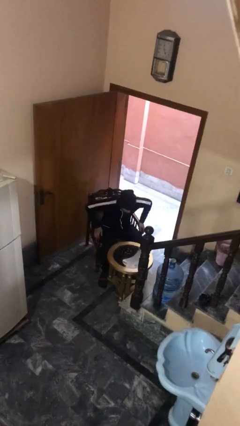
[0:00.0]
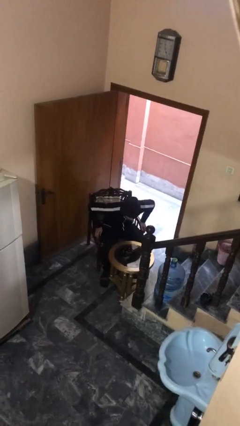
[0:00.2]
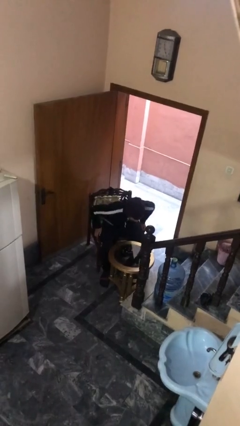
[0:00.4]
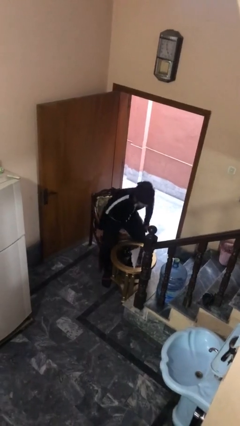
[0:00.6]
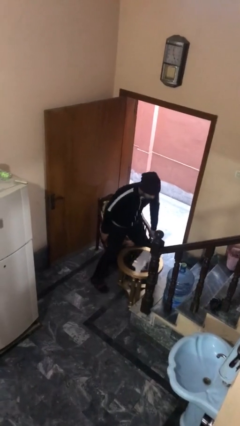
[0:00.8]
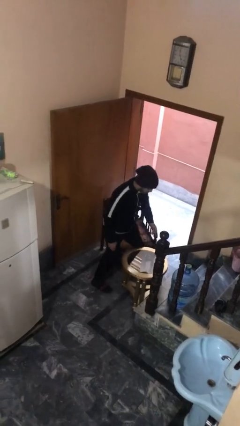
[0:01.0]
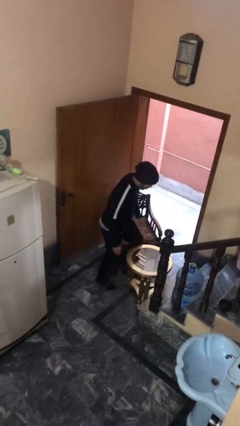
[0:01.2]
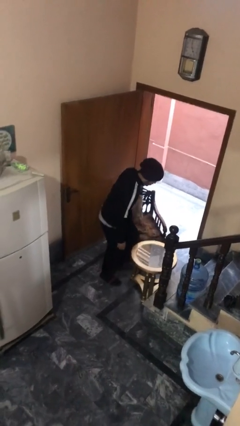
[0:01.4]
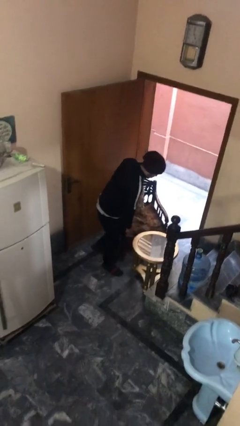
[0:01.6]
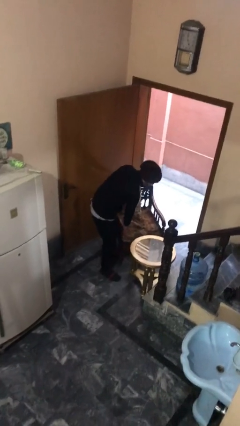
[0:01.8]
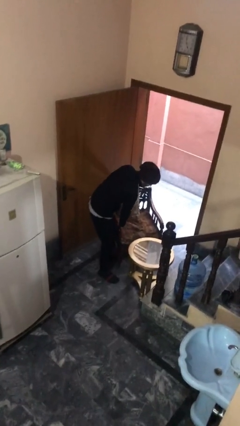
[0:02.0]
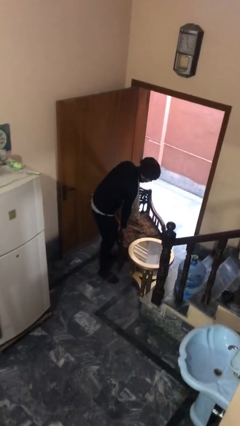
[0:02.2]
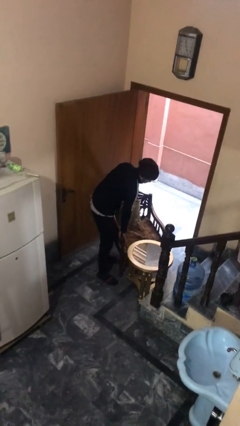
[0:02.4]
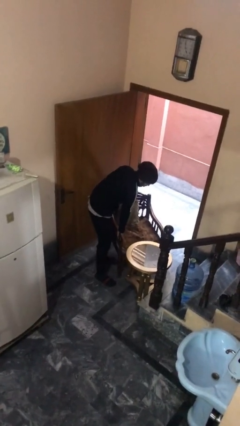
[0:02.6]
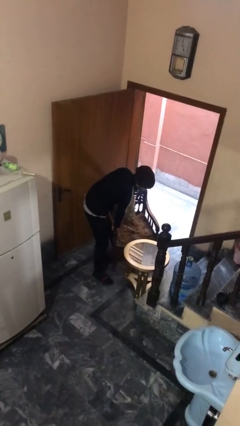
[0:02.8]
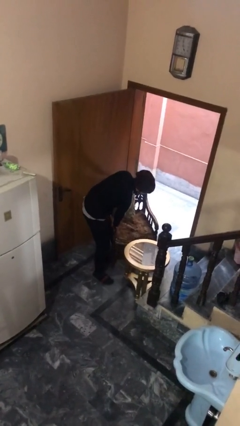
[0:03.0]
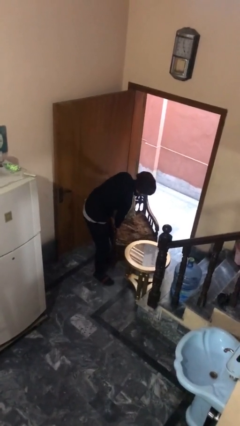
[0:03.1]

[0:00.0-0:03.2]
person stands up

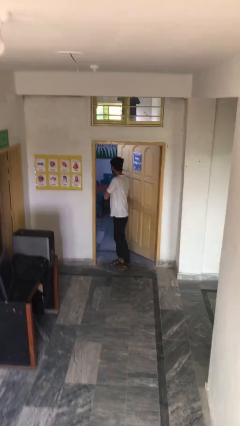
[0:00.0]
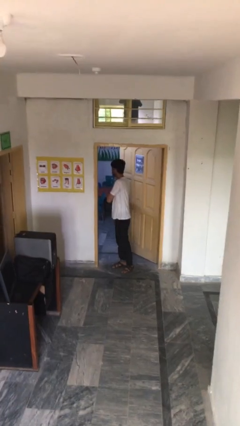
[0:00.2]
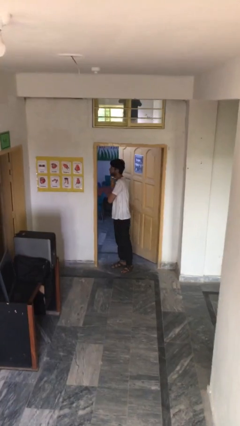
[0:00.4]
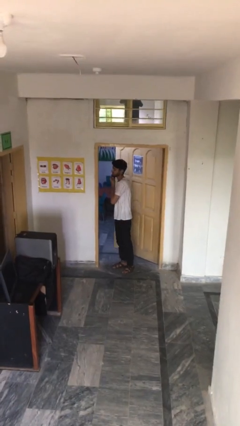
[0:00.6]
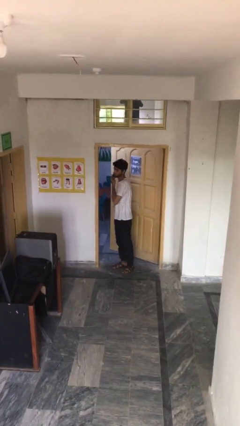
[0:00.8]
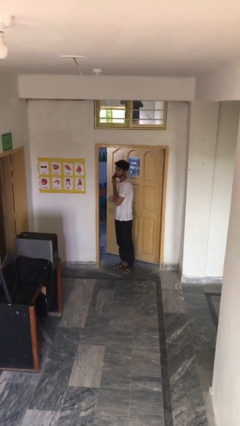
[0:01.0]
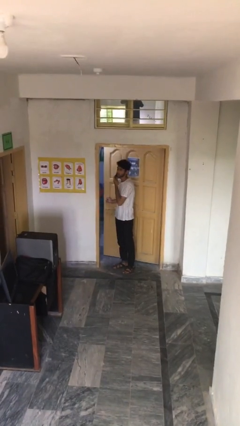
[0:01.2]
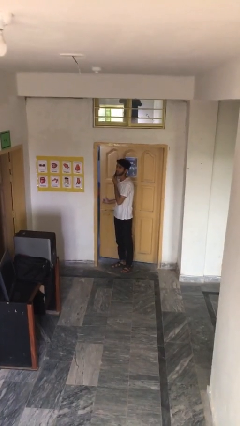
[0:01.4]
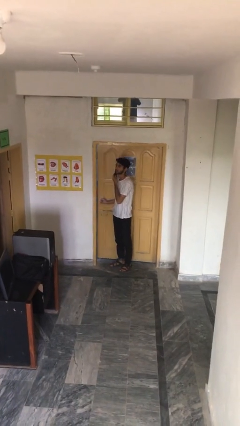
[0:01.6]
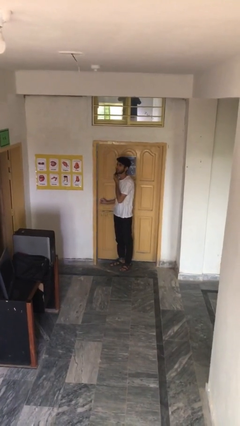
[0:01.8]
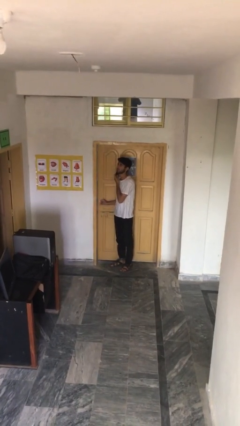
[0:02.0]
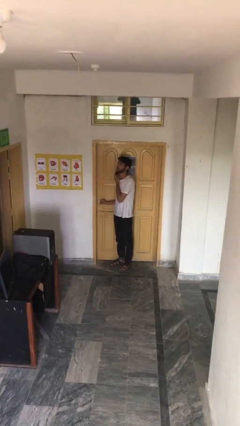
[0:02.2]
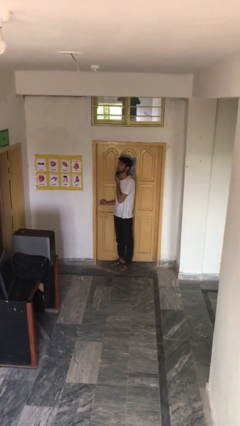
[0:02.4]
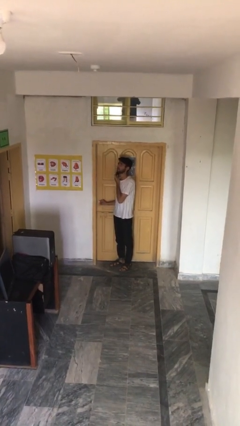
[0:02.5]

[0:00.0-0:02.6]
person closes facility door

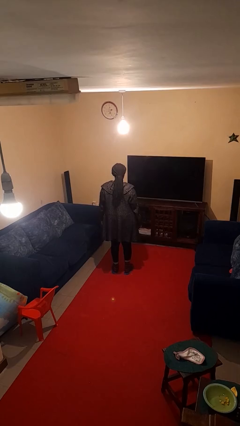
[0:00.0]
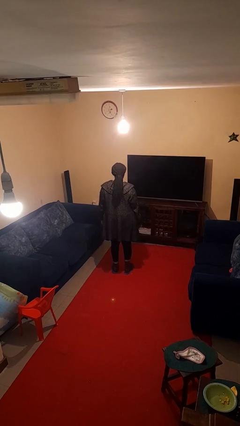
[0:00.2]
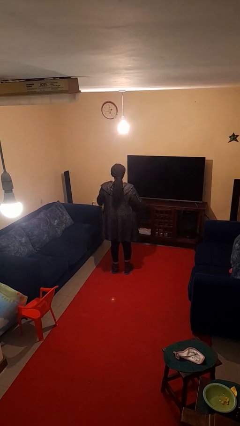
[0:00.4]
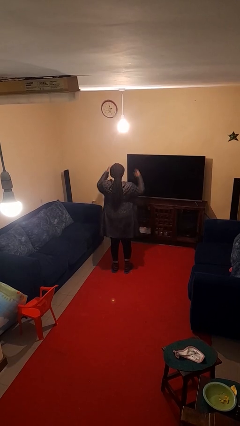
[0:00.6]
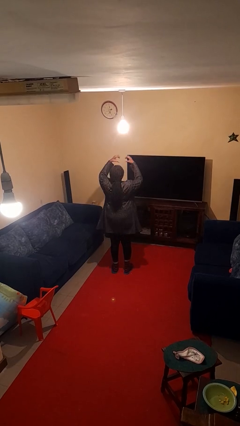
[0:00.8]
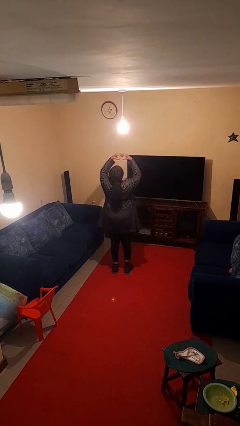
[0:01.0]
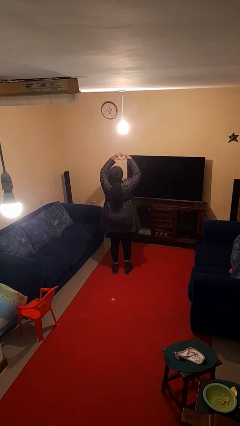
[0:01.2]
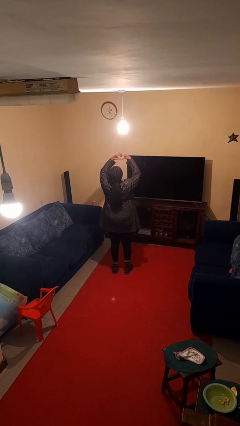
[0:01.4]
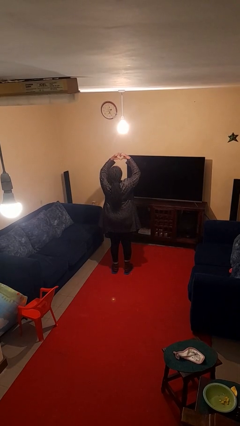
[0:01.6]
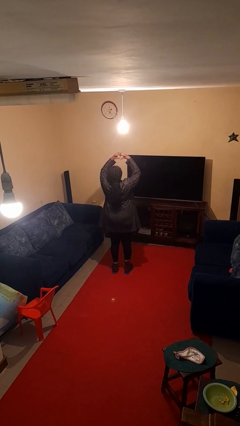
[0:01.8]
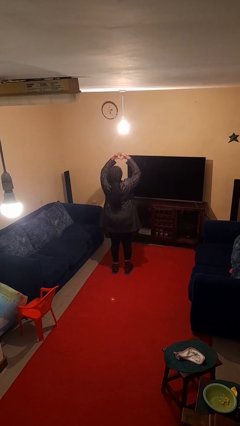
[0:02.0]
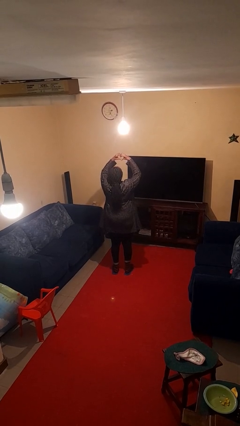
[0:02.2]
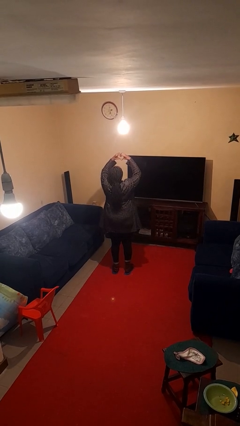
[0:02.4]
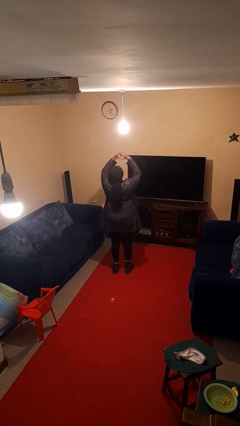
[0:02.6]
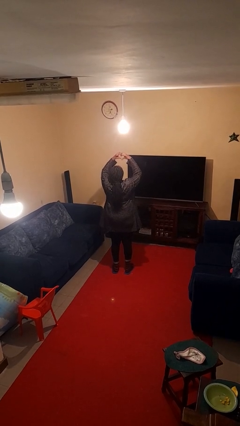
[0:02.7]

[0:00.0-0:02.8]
person gestures heart

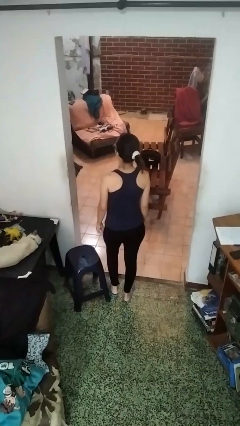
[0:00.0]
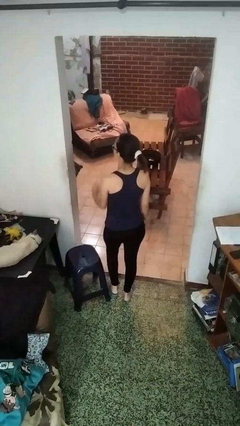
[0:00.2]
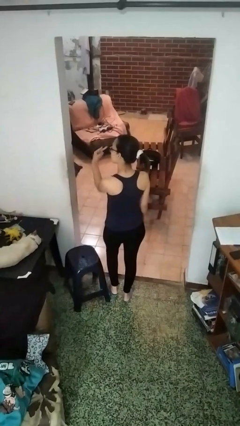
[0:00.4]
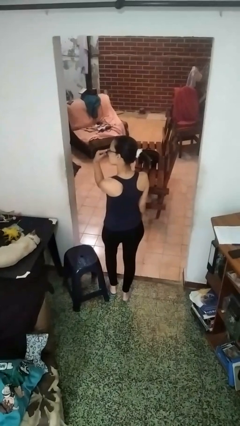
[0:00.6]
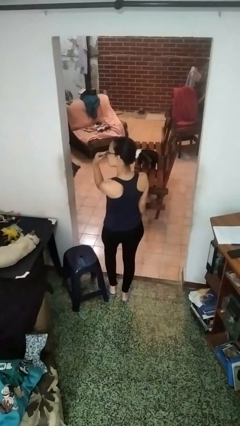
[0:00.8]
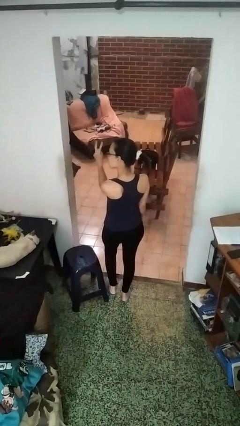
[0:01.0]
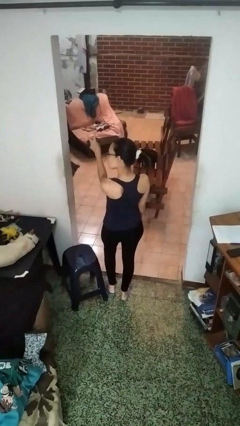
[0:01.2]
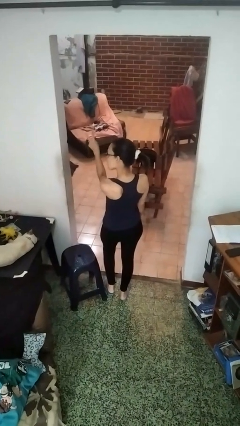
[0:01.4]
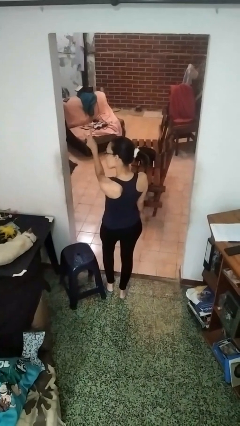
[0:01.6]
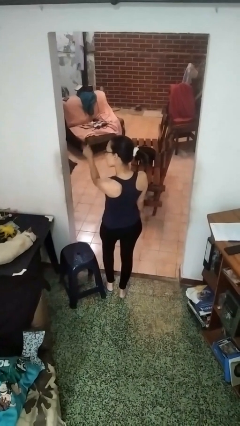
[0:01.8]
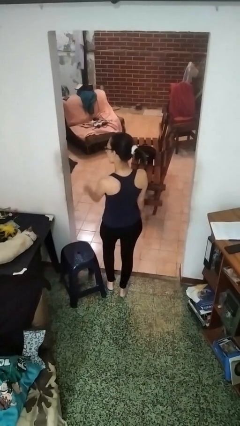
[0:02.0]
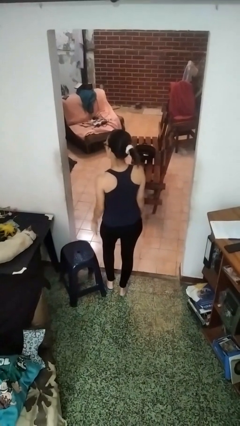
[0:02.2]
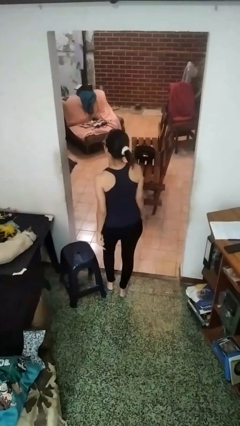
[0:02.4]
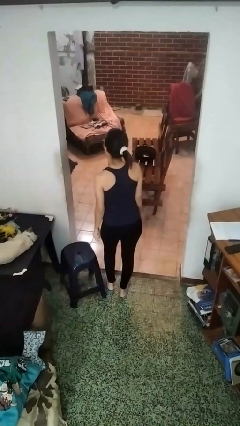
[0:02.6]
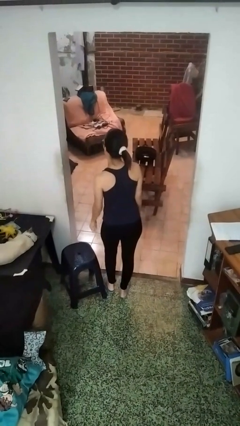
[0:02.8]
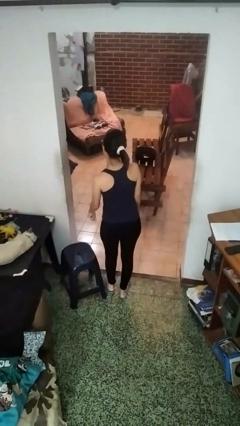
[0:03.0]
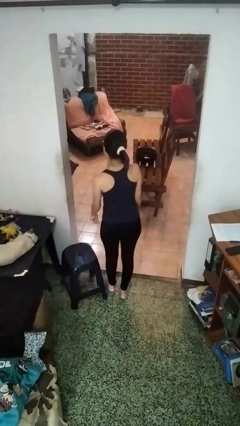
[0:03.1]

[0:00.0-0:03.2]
person gestures watch closely

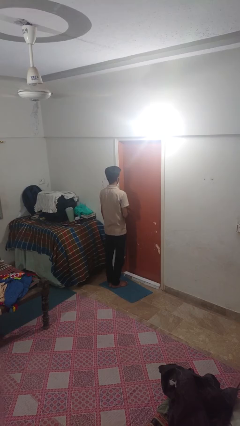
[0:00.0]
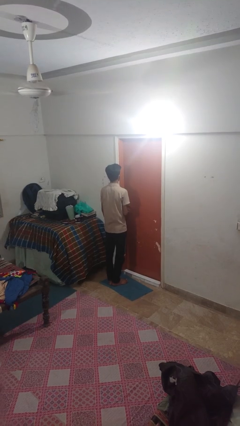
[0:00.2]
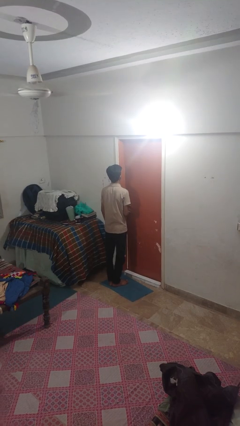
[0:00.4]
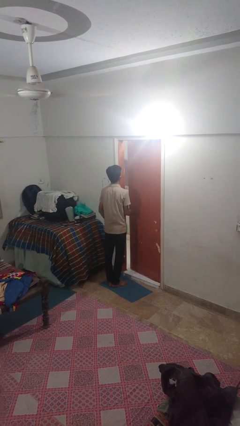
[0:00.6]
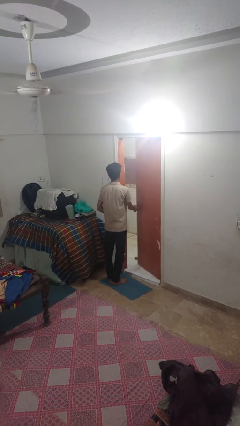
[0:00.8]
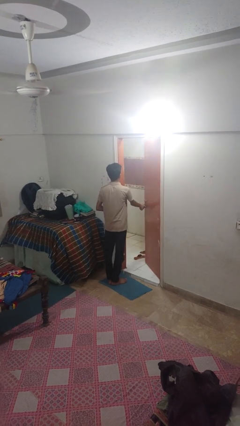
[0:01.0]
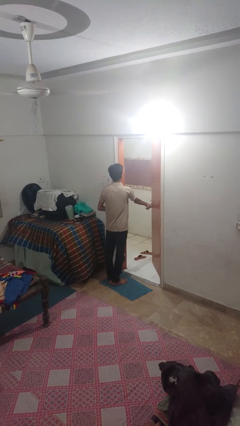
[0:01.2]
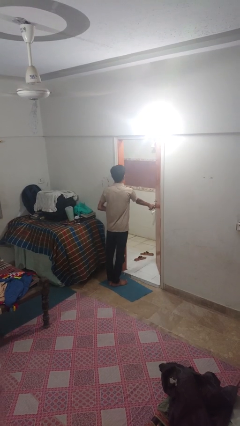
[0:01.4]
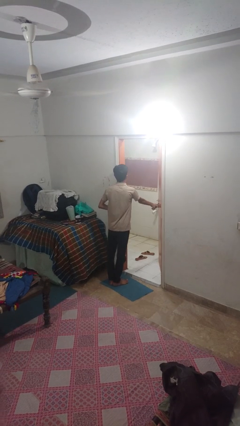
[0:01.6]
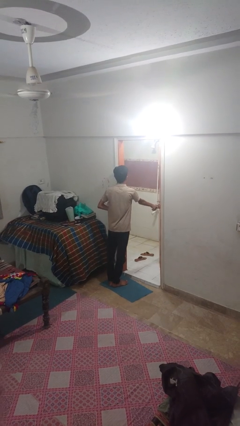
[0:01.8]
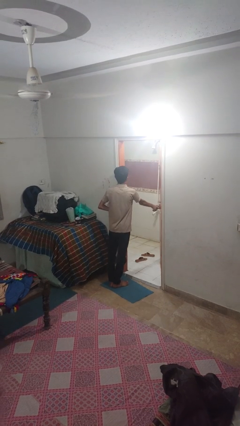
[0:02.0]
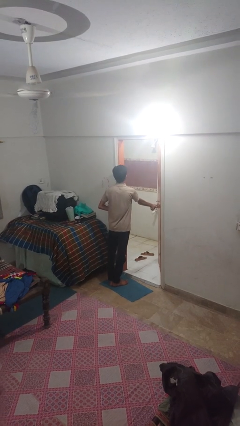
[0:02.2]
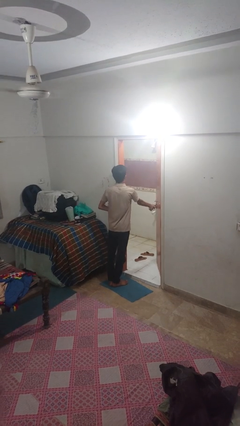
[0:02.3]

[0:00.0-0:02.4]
person opens facility door

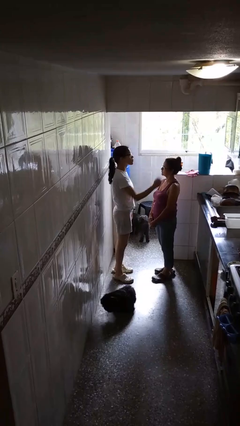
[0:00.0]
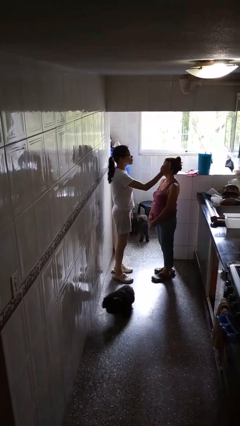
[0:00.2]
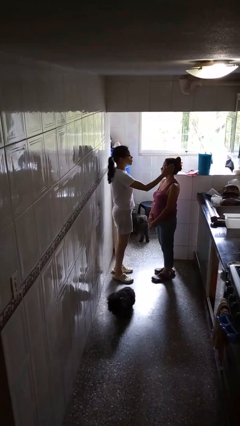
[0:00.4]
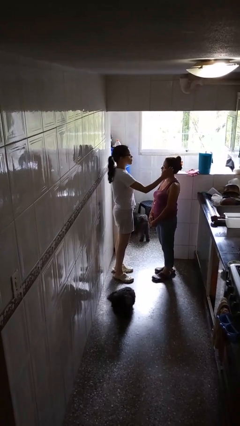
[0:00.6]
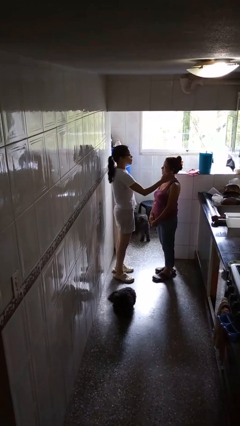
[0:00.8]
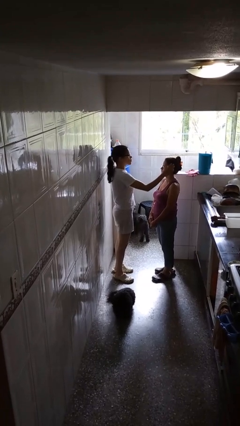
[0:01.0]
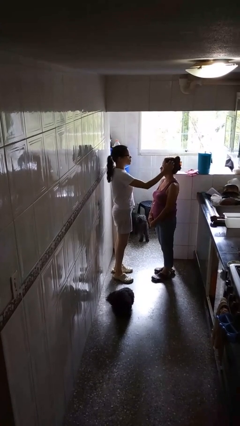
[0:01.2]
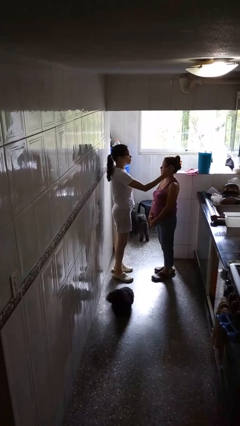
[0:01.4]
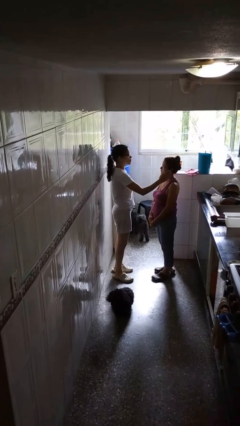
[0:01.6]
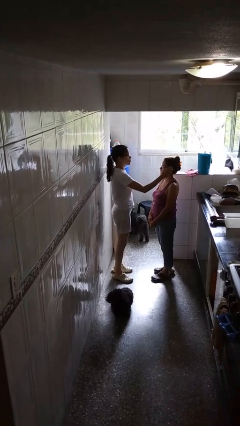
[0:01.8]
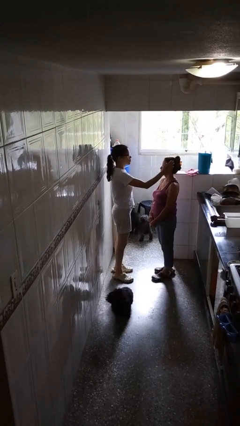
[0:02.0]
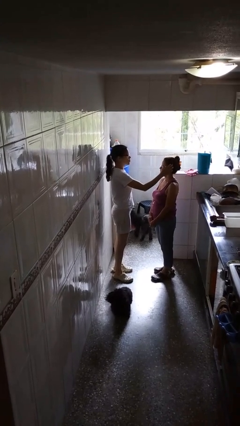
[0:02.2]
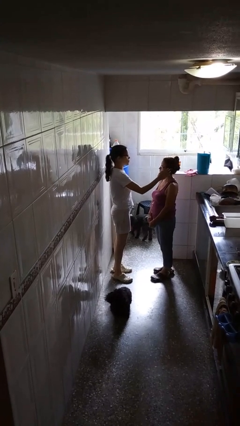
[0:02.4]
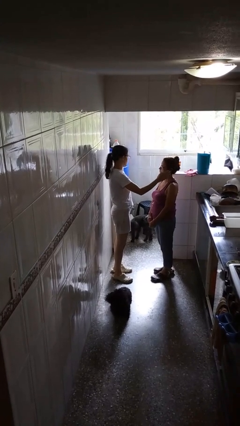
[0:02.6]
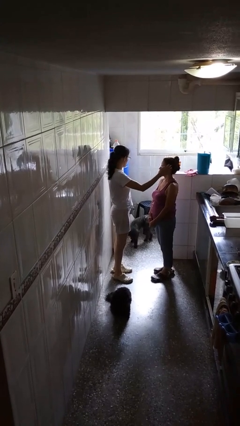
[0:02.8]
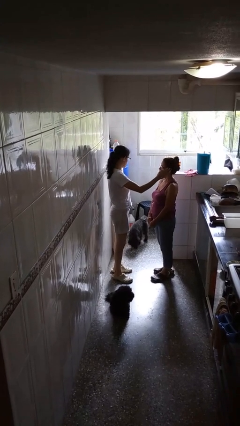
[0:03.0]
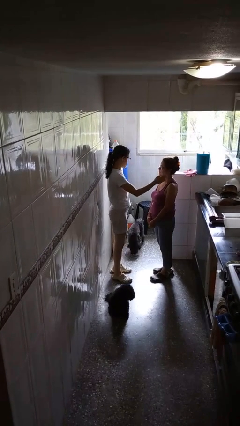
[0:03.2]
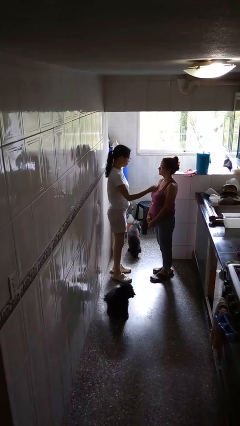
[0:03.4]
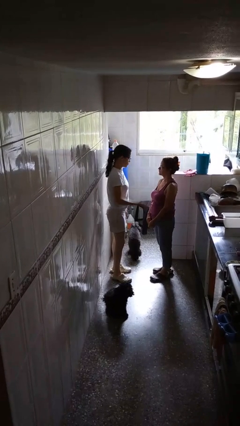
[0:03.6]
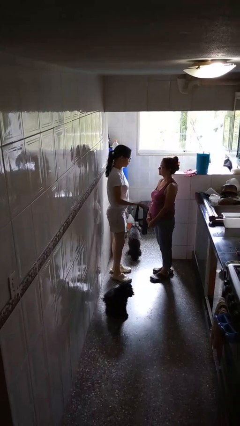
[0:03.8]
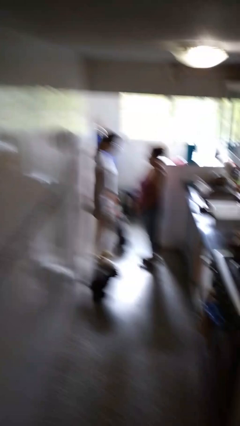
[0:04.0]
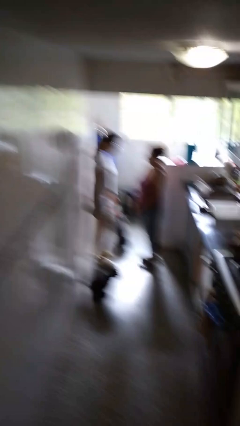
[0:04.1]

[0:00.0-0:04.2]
person touches face of person
